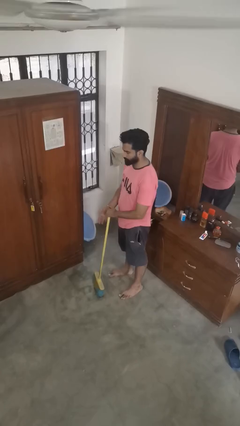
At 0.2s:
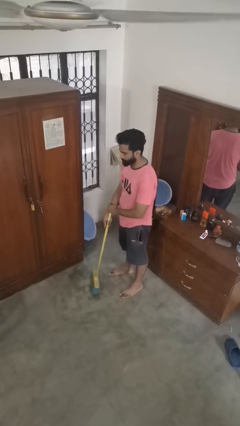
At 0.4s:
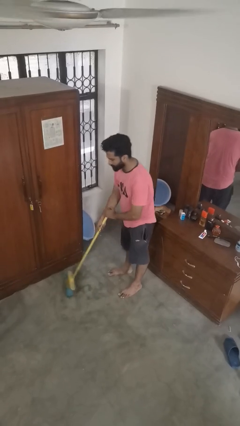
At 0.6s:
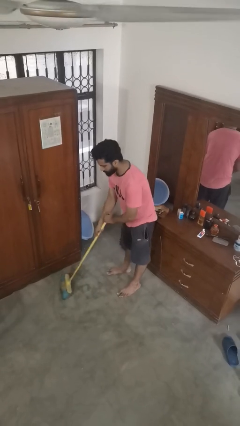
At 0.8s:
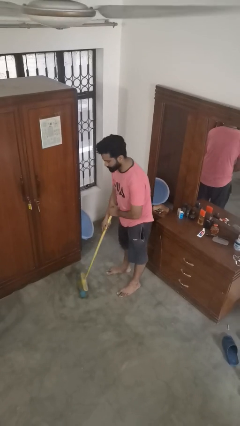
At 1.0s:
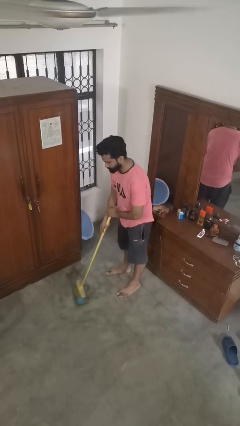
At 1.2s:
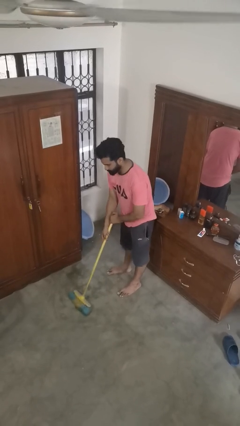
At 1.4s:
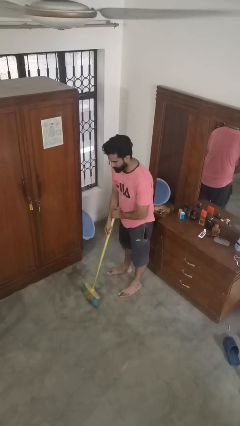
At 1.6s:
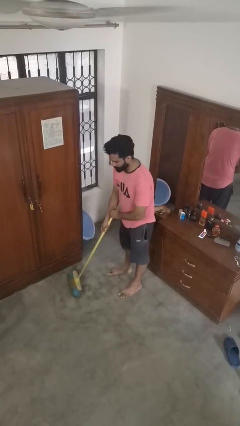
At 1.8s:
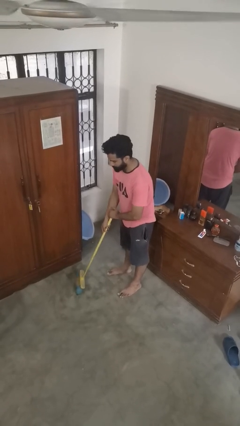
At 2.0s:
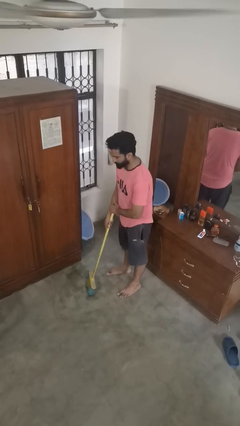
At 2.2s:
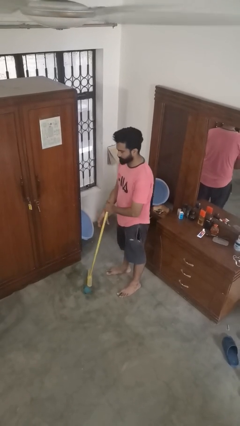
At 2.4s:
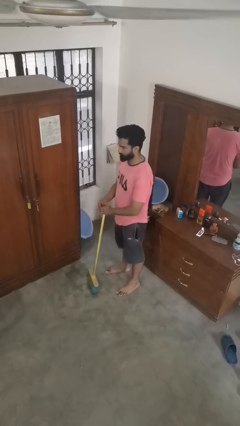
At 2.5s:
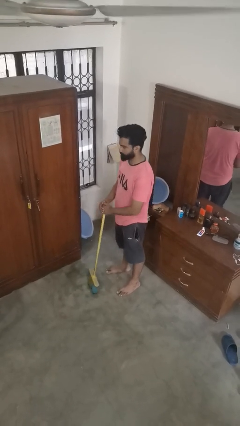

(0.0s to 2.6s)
person sweeps floor

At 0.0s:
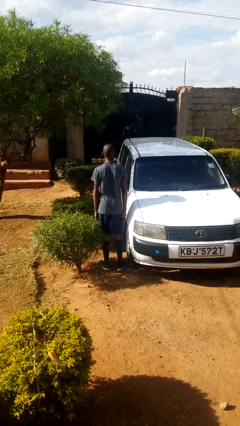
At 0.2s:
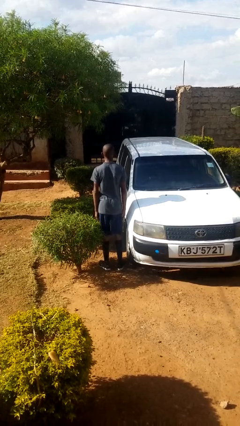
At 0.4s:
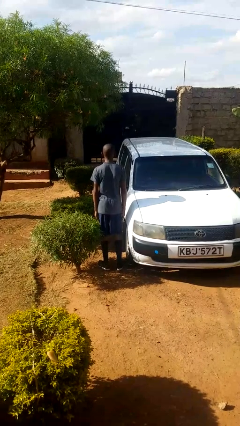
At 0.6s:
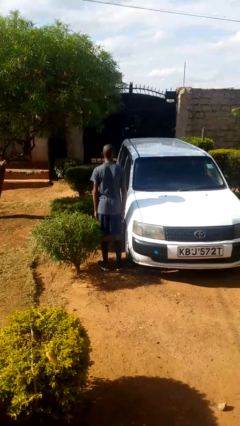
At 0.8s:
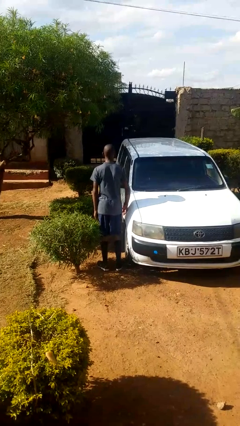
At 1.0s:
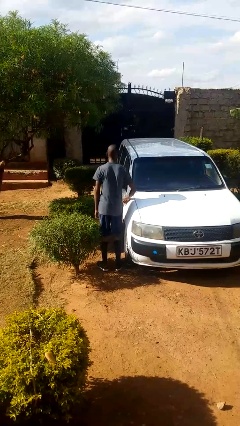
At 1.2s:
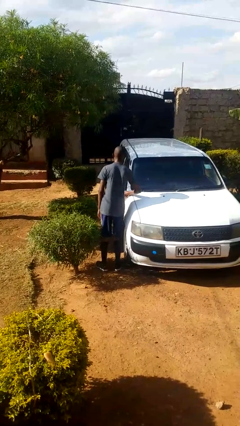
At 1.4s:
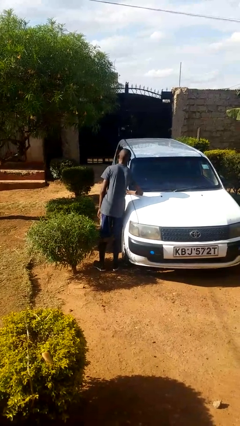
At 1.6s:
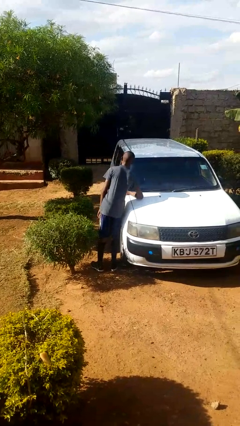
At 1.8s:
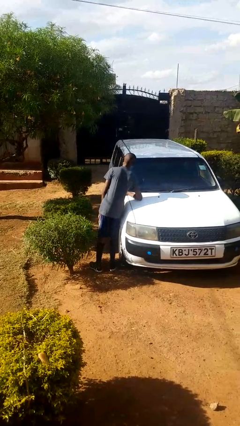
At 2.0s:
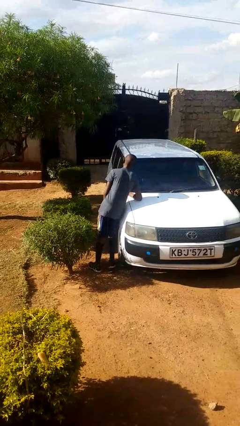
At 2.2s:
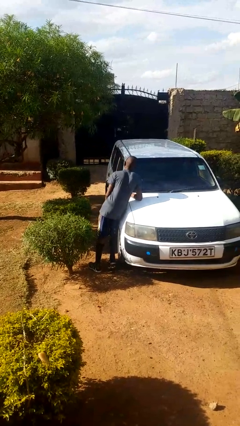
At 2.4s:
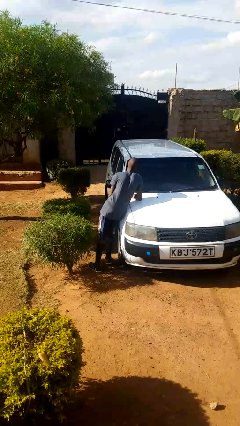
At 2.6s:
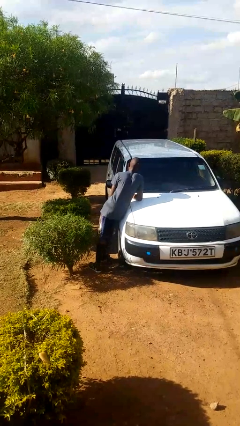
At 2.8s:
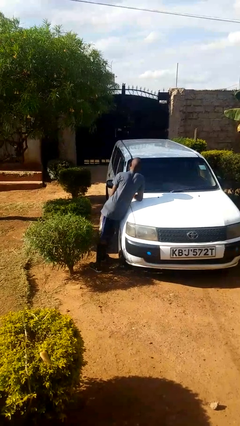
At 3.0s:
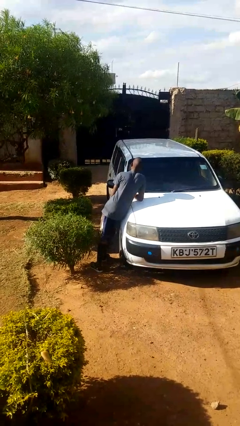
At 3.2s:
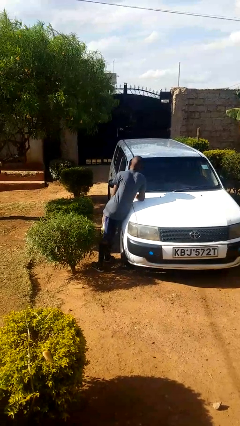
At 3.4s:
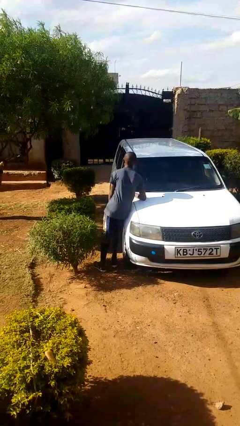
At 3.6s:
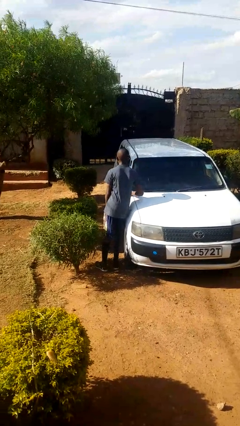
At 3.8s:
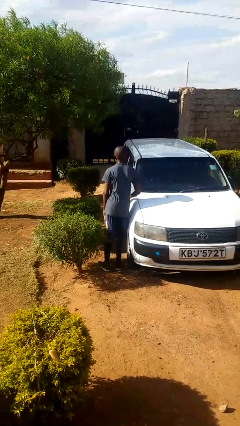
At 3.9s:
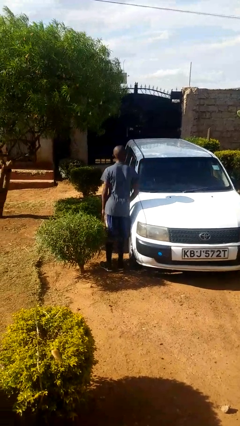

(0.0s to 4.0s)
person leans against car

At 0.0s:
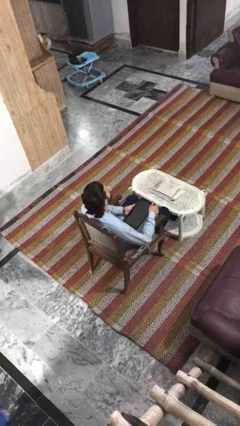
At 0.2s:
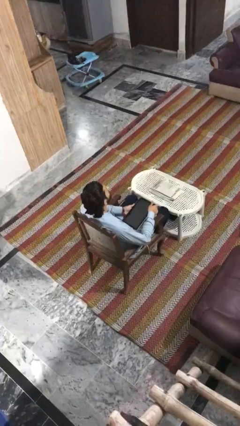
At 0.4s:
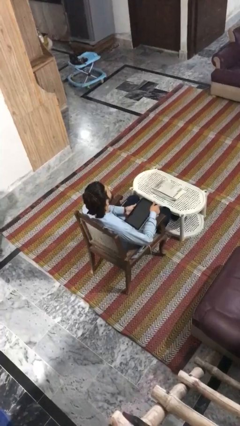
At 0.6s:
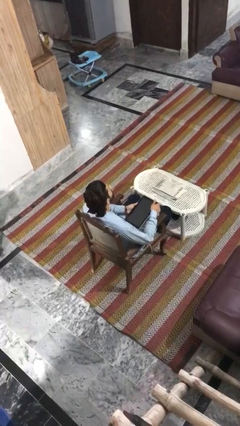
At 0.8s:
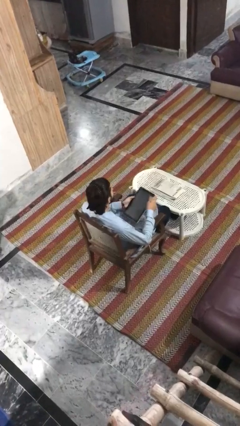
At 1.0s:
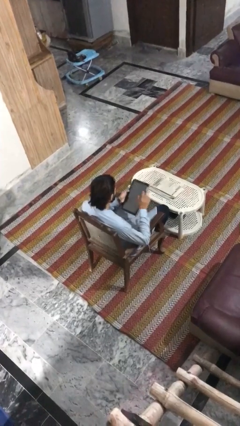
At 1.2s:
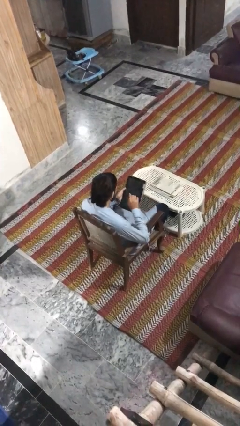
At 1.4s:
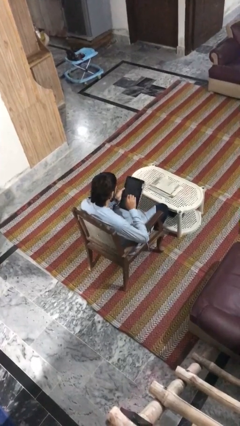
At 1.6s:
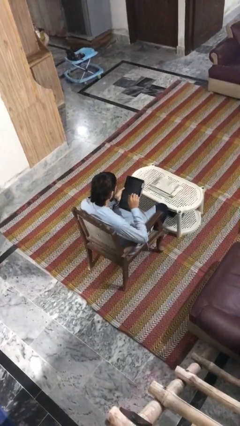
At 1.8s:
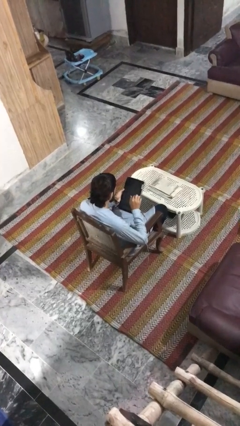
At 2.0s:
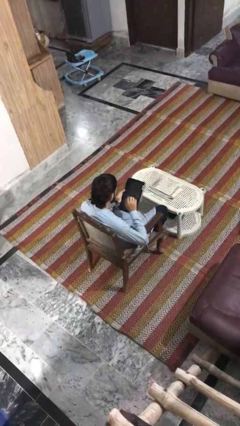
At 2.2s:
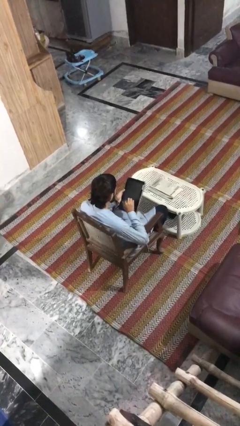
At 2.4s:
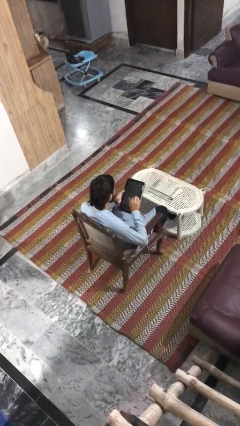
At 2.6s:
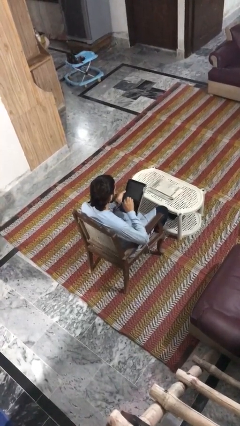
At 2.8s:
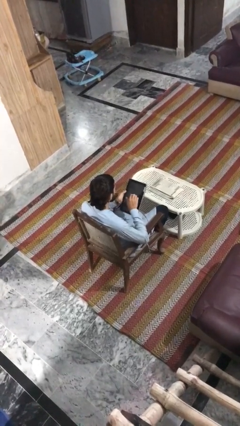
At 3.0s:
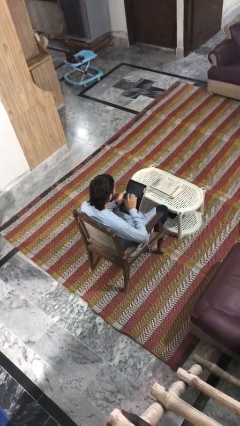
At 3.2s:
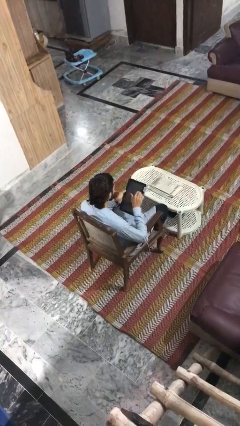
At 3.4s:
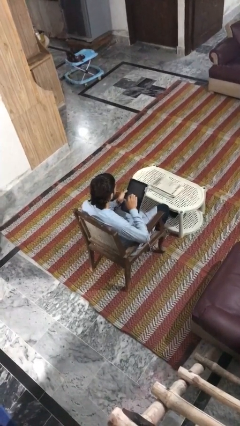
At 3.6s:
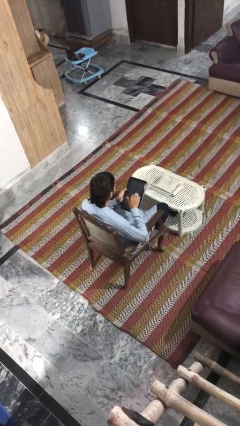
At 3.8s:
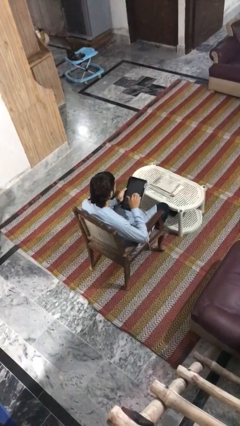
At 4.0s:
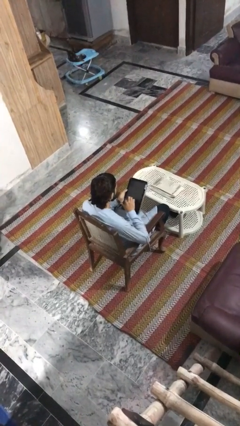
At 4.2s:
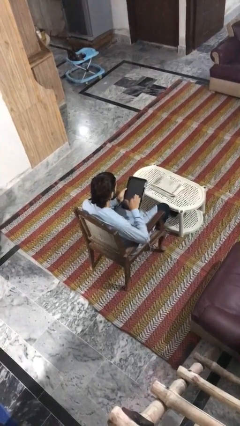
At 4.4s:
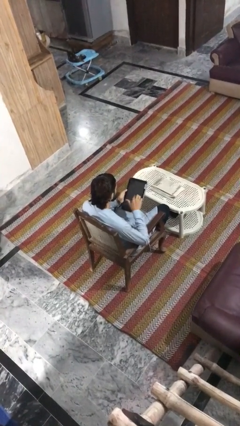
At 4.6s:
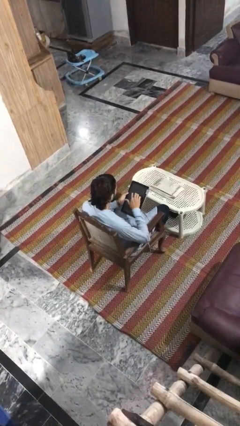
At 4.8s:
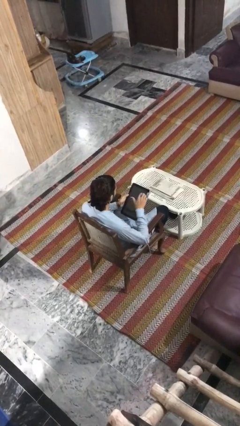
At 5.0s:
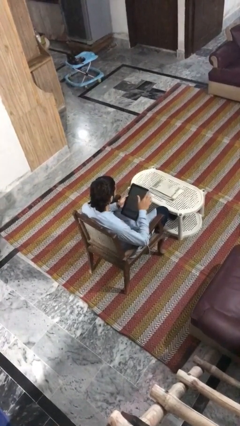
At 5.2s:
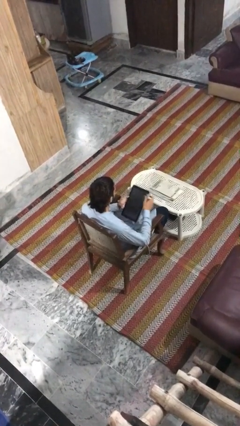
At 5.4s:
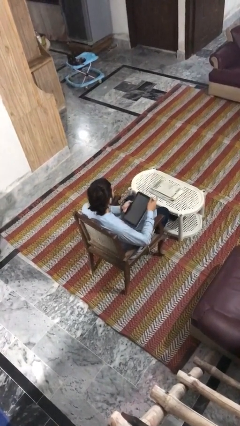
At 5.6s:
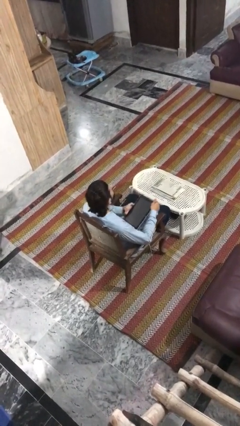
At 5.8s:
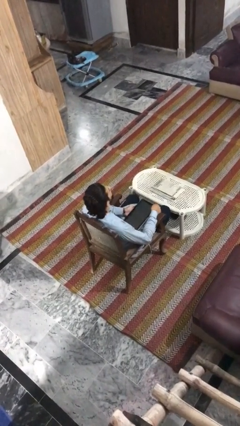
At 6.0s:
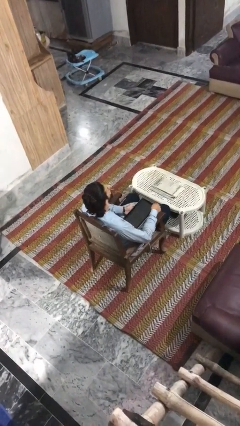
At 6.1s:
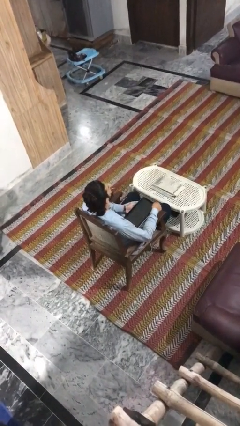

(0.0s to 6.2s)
person interacts with tablet

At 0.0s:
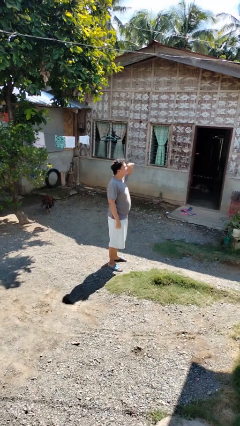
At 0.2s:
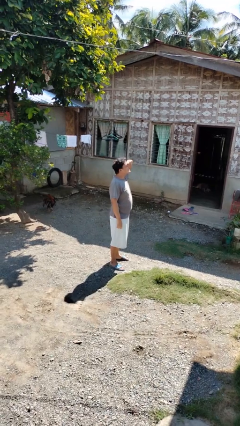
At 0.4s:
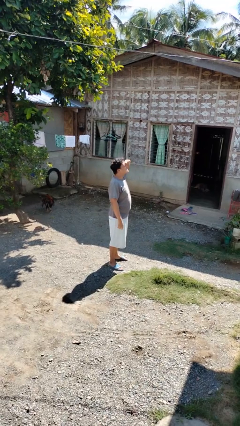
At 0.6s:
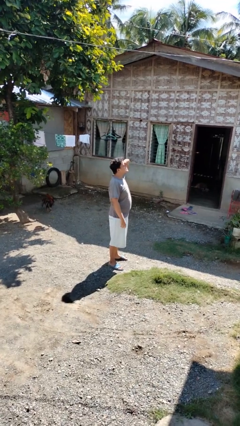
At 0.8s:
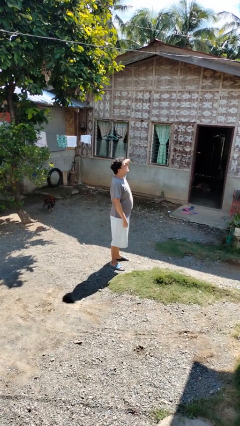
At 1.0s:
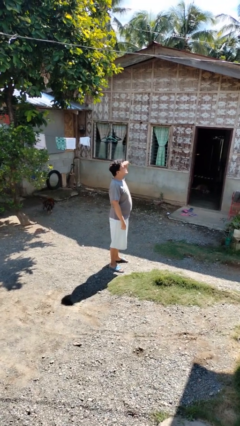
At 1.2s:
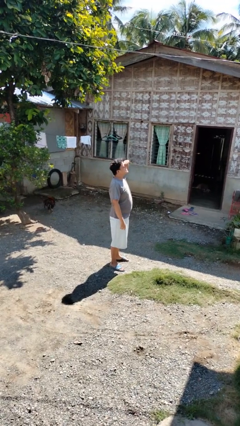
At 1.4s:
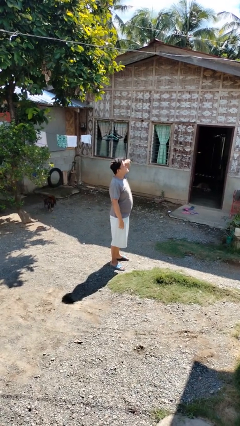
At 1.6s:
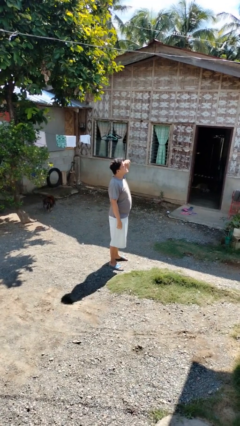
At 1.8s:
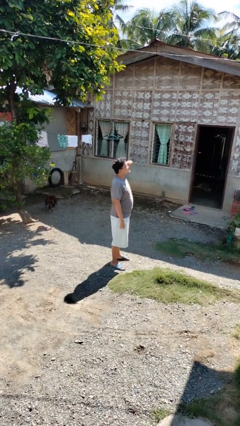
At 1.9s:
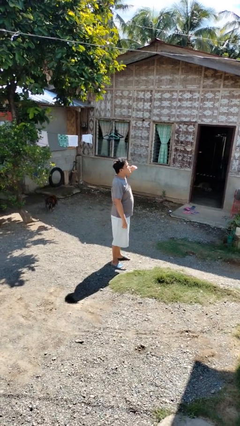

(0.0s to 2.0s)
person shades eyes

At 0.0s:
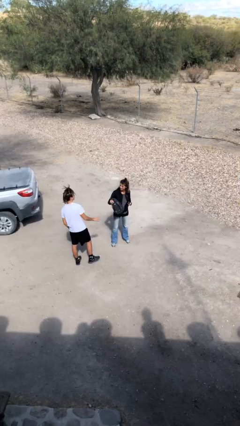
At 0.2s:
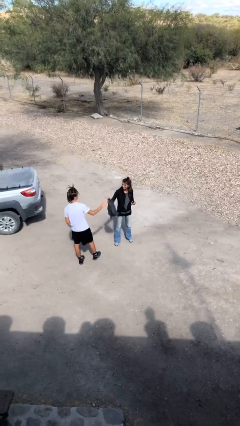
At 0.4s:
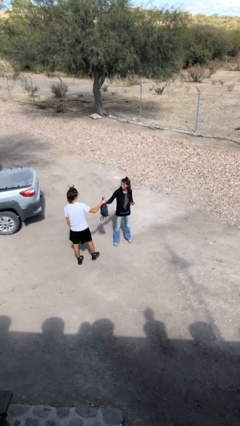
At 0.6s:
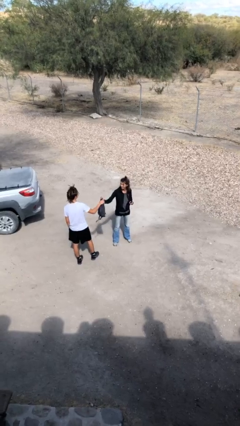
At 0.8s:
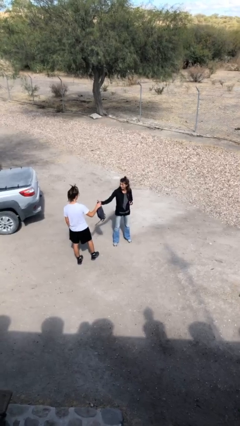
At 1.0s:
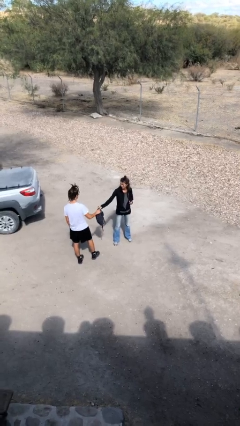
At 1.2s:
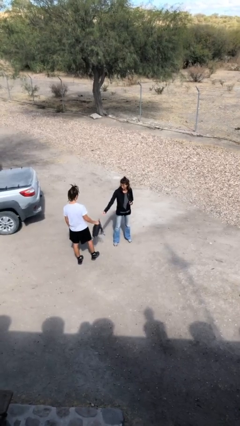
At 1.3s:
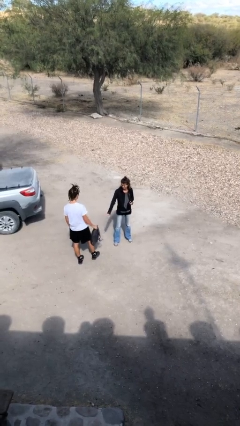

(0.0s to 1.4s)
person transfers object to person

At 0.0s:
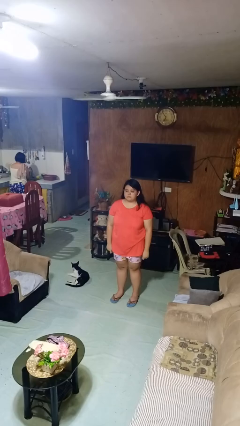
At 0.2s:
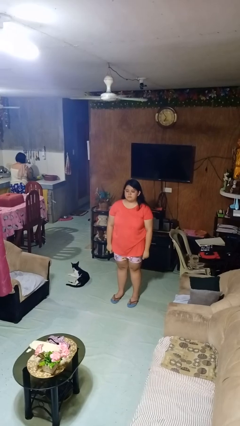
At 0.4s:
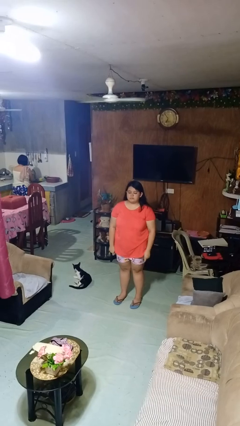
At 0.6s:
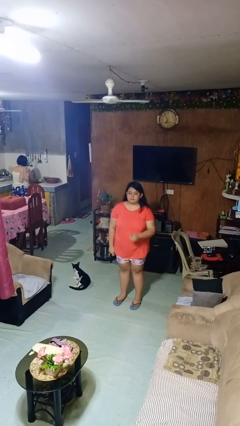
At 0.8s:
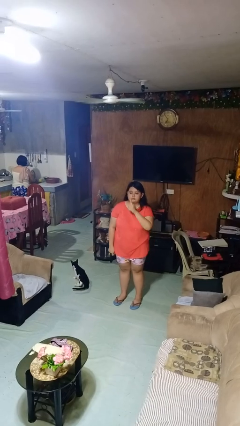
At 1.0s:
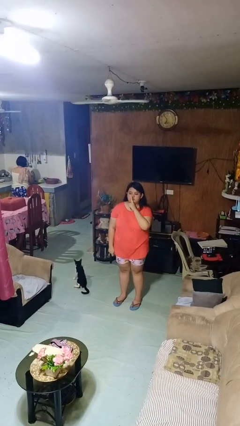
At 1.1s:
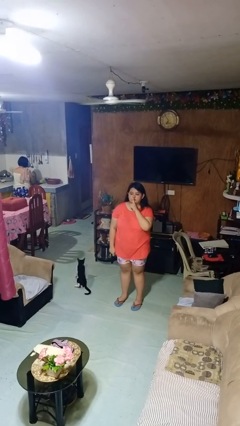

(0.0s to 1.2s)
person gestures be quiet

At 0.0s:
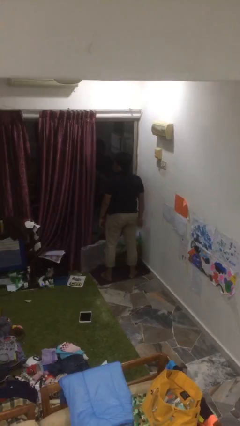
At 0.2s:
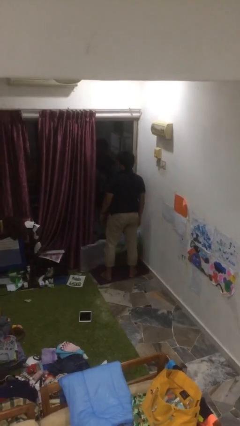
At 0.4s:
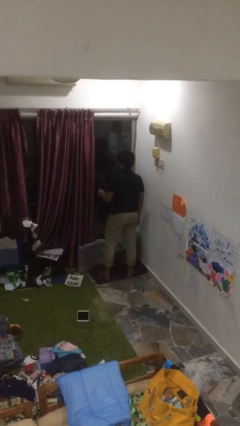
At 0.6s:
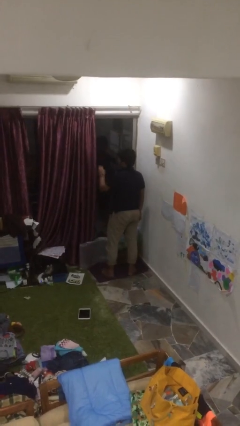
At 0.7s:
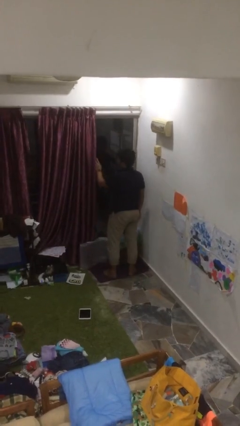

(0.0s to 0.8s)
person closes curtains
